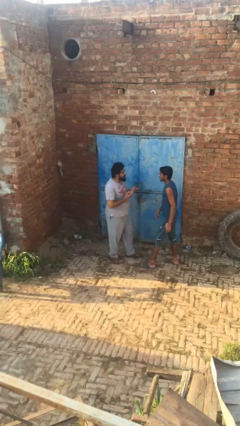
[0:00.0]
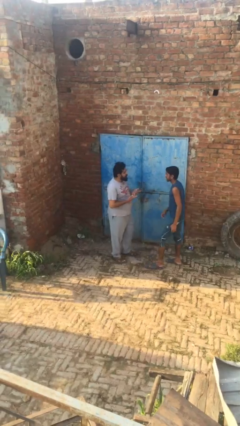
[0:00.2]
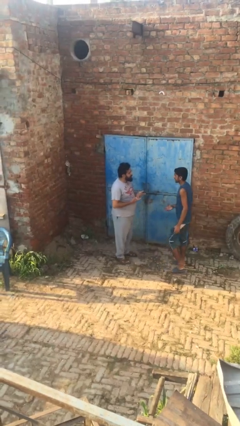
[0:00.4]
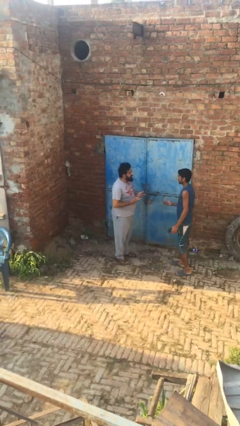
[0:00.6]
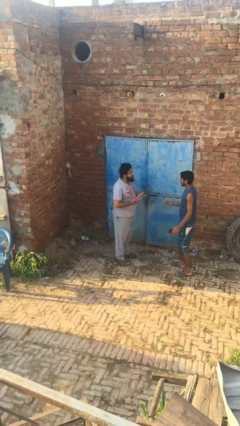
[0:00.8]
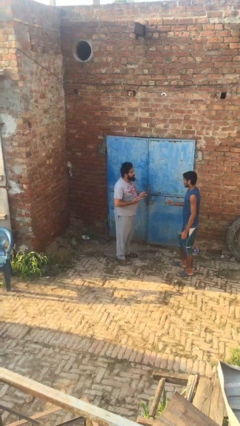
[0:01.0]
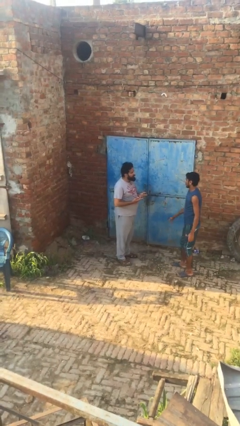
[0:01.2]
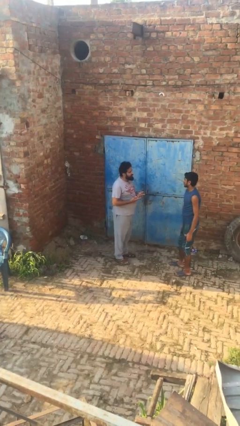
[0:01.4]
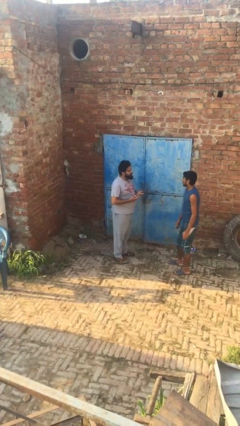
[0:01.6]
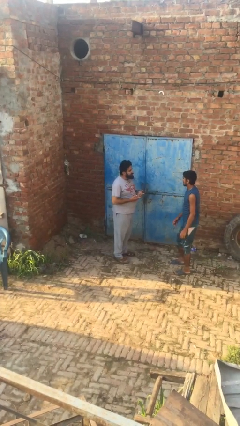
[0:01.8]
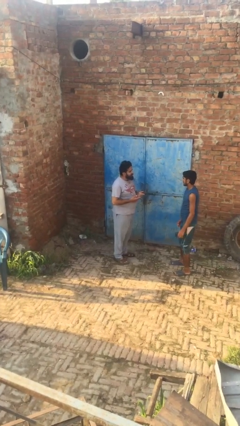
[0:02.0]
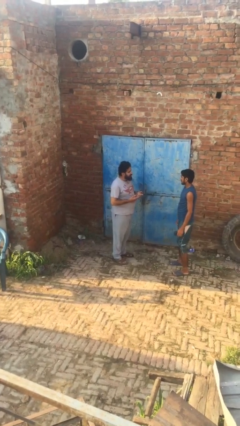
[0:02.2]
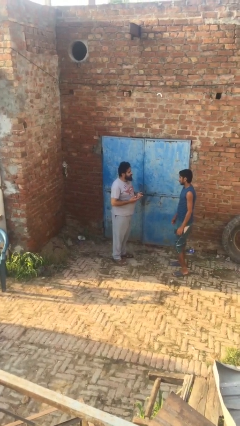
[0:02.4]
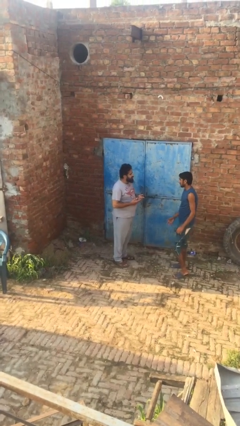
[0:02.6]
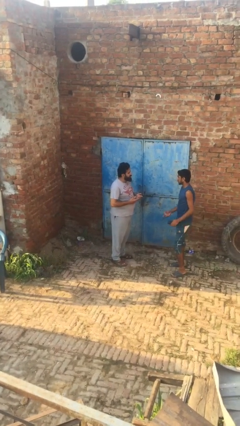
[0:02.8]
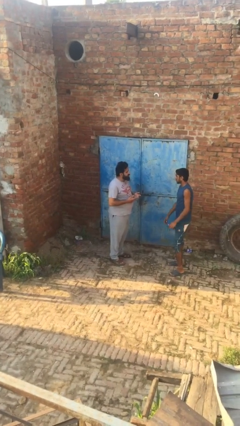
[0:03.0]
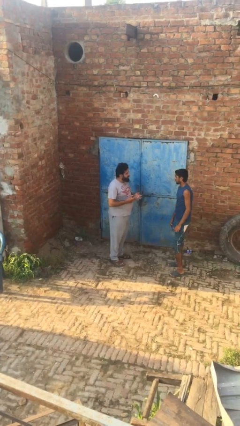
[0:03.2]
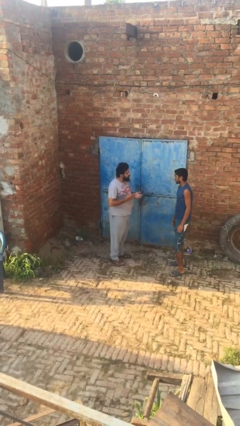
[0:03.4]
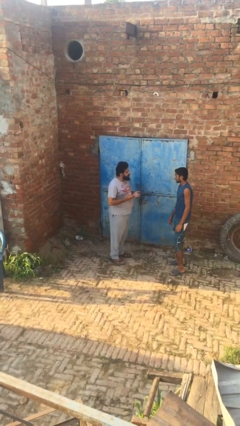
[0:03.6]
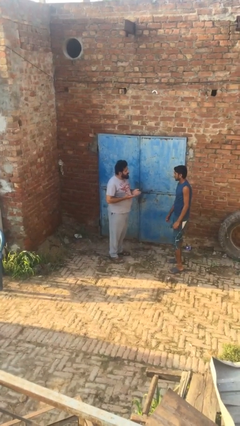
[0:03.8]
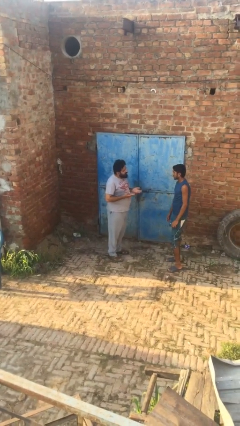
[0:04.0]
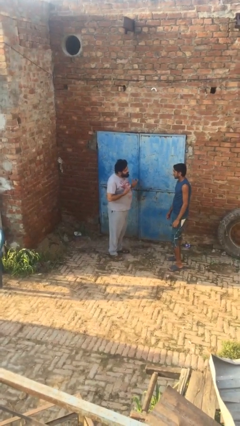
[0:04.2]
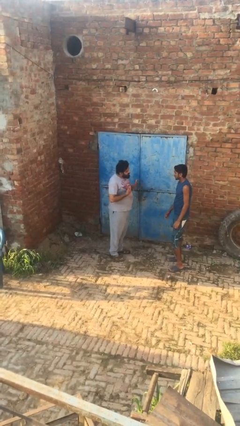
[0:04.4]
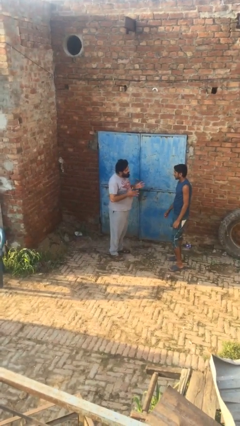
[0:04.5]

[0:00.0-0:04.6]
person talks to person

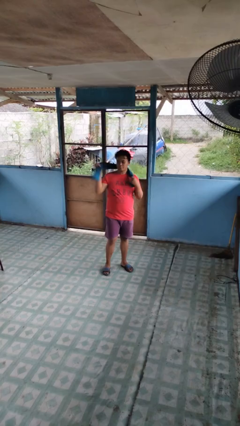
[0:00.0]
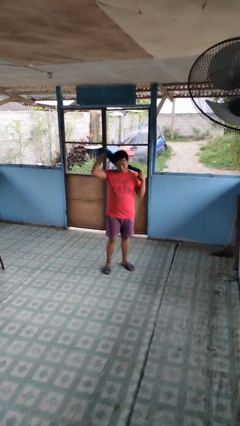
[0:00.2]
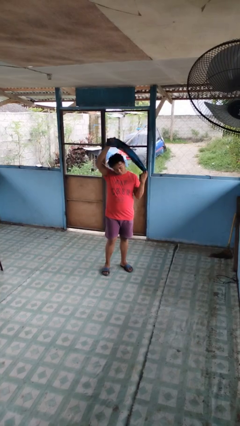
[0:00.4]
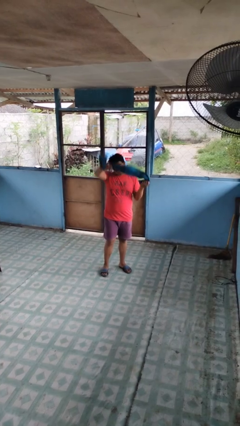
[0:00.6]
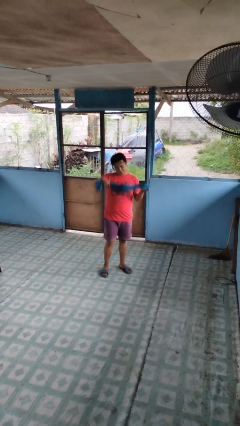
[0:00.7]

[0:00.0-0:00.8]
person takes off scarf

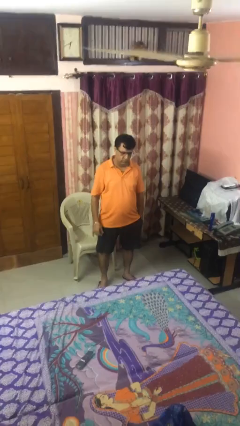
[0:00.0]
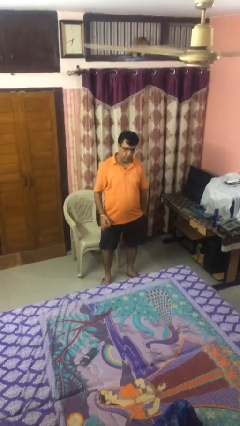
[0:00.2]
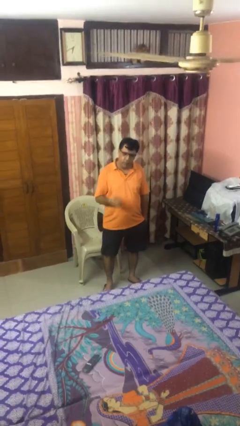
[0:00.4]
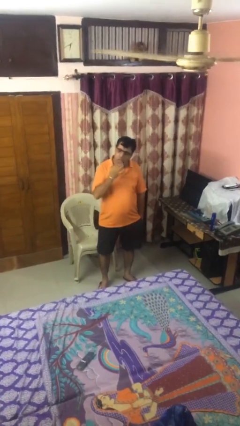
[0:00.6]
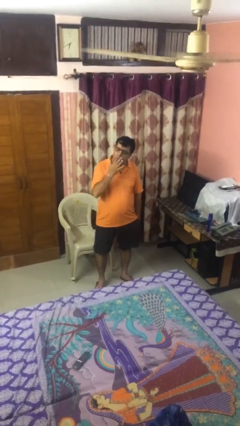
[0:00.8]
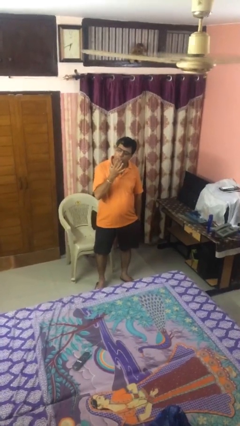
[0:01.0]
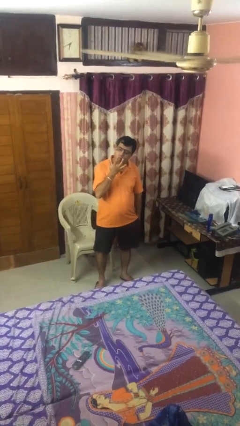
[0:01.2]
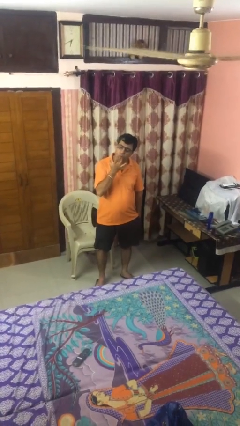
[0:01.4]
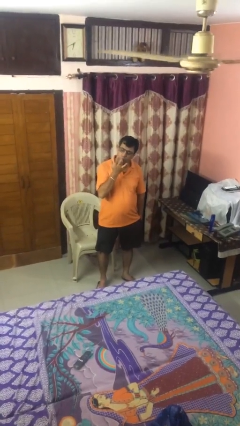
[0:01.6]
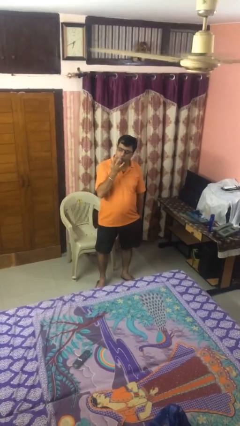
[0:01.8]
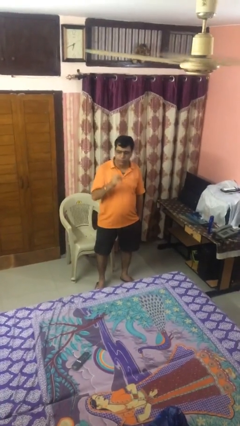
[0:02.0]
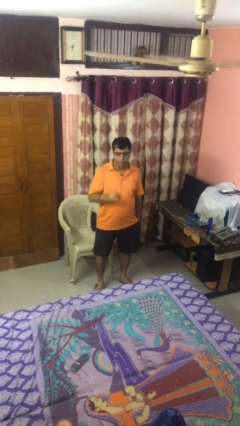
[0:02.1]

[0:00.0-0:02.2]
person licks fingers

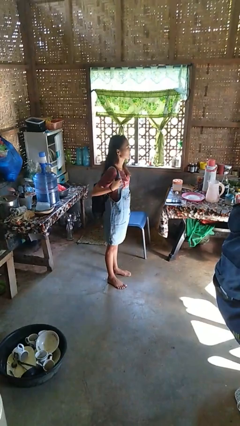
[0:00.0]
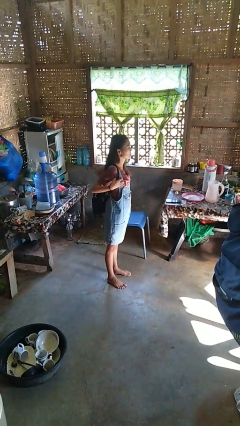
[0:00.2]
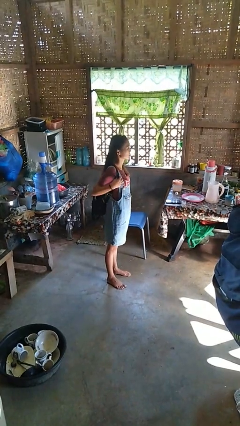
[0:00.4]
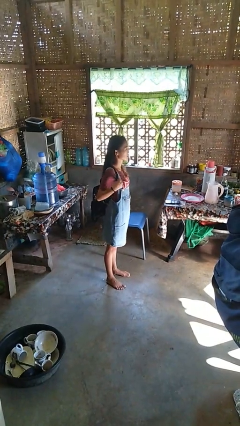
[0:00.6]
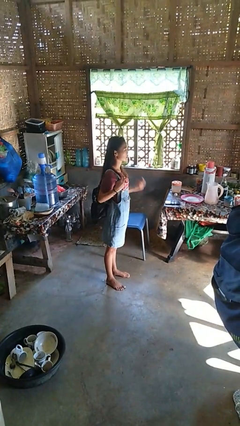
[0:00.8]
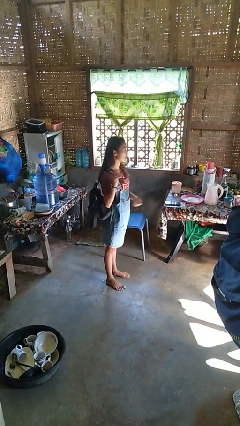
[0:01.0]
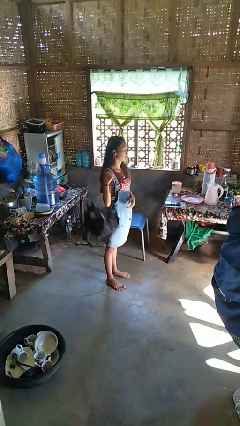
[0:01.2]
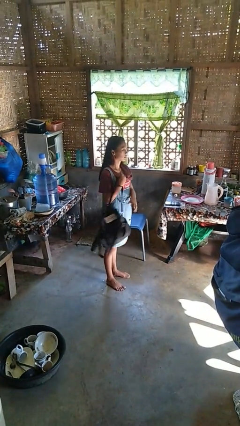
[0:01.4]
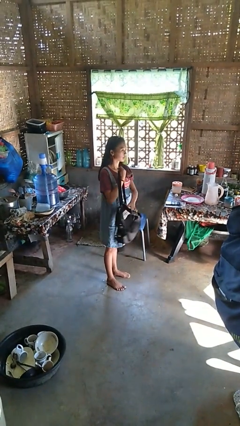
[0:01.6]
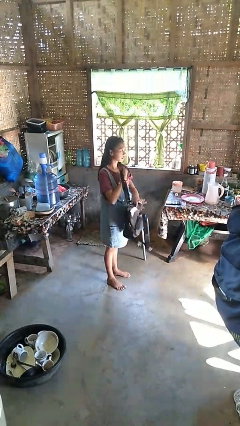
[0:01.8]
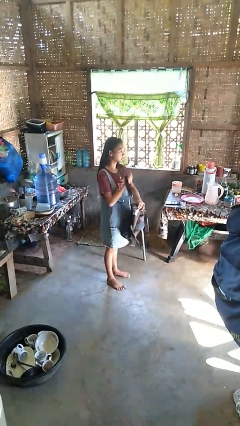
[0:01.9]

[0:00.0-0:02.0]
person takes off backpack

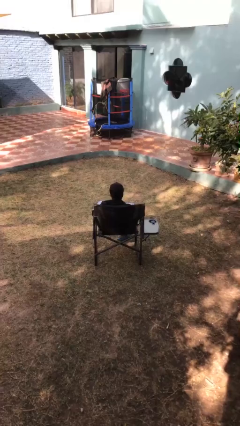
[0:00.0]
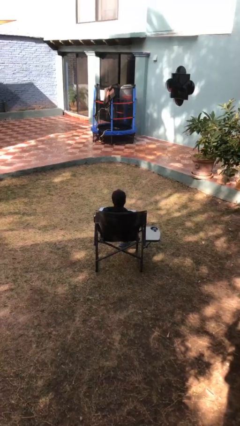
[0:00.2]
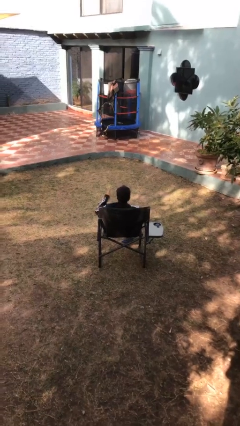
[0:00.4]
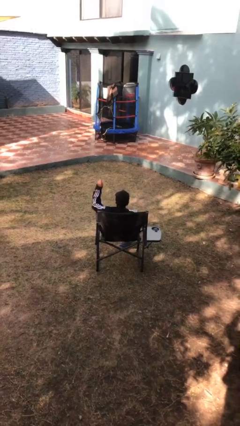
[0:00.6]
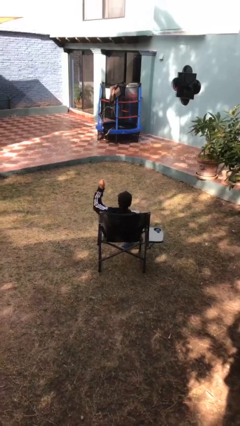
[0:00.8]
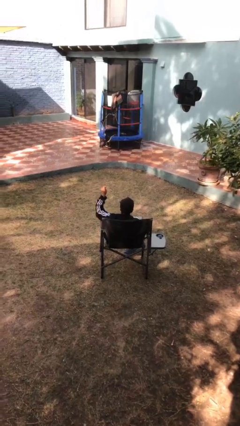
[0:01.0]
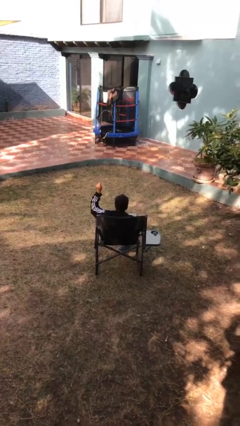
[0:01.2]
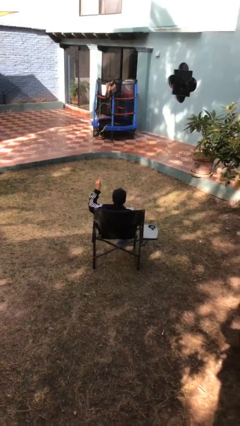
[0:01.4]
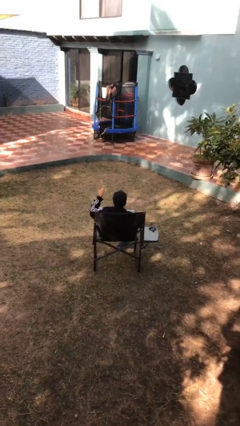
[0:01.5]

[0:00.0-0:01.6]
person gestures number one

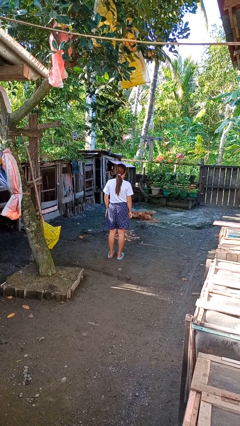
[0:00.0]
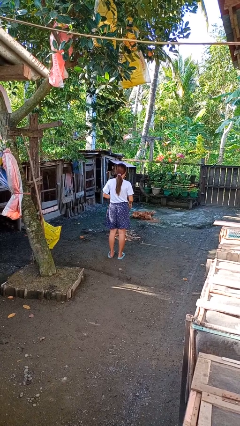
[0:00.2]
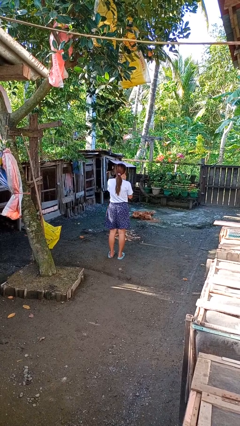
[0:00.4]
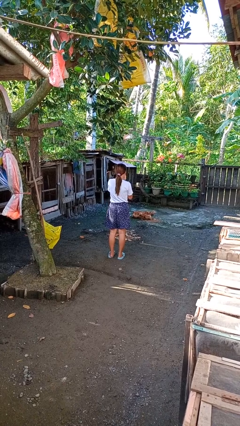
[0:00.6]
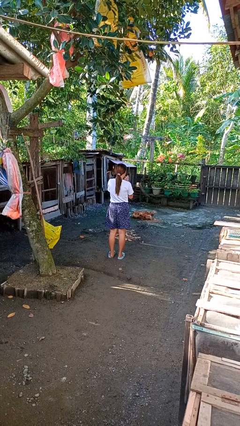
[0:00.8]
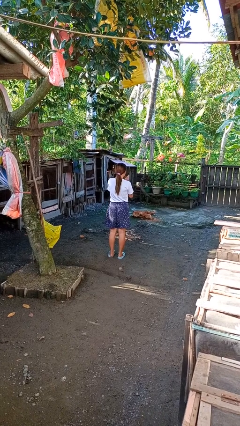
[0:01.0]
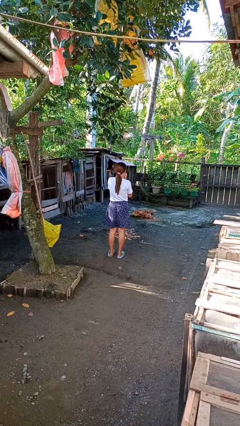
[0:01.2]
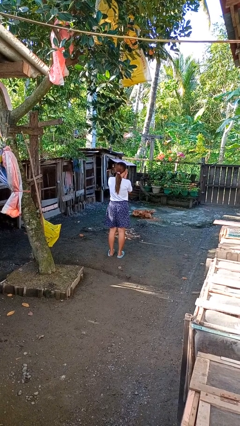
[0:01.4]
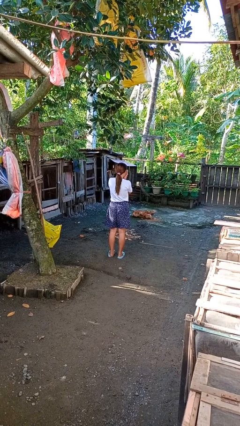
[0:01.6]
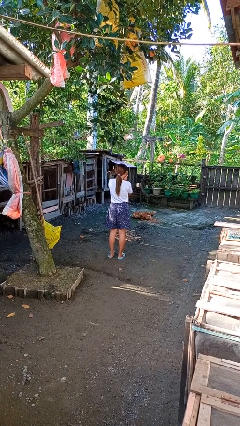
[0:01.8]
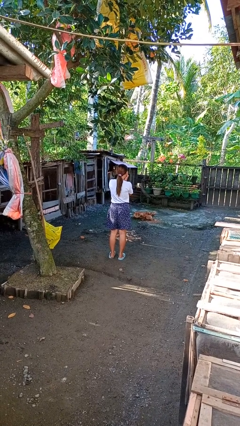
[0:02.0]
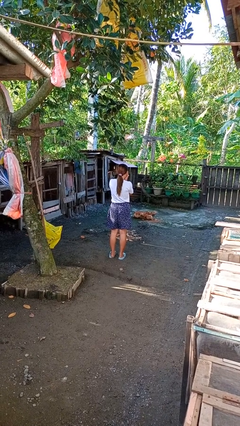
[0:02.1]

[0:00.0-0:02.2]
person blows into hands

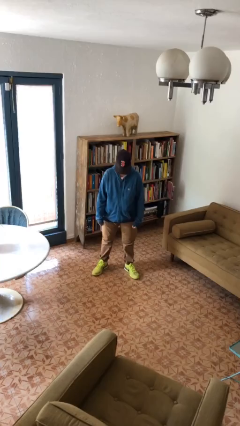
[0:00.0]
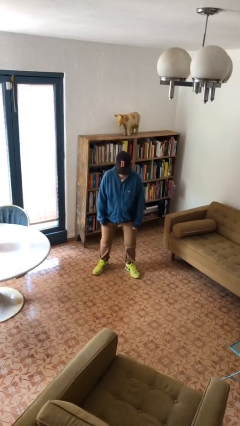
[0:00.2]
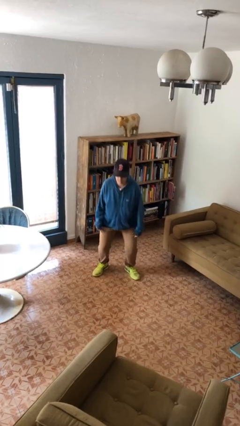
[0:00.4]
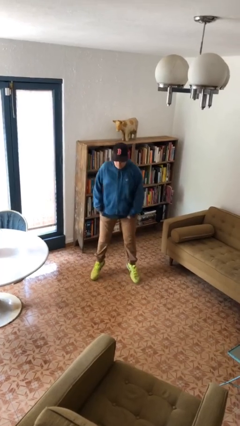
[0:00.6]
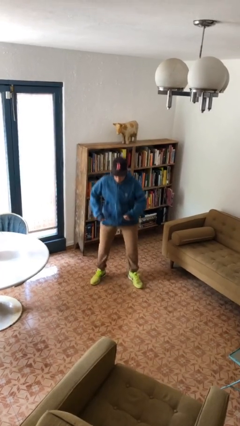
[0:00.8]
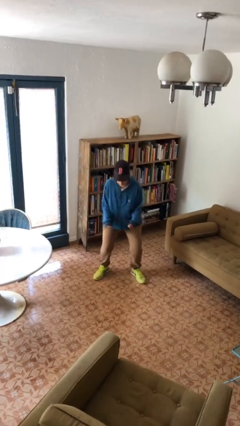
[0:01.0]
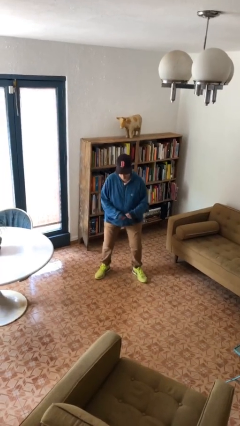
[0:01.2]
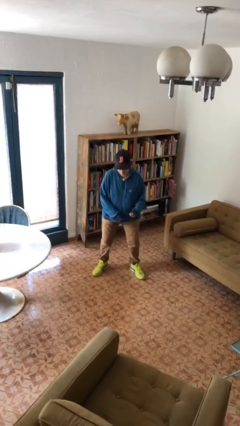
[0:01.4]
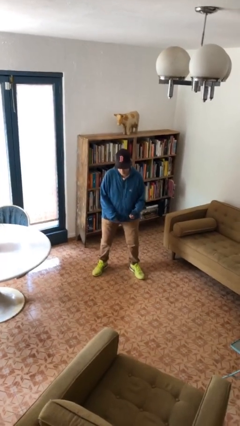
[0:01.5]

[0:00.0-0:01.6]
person jumps

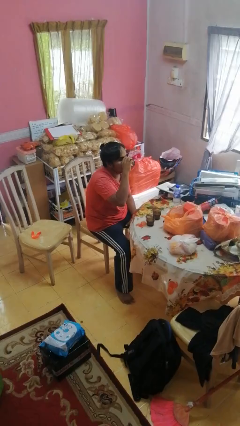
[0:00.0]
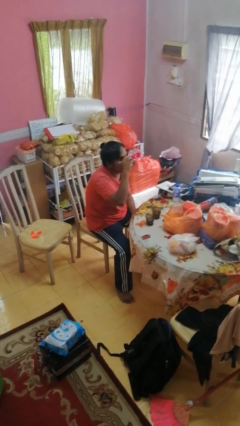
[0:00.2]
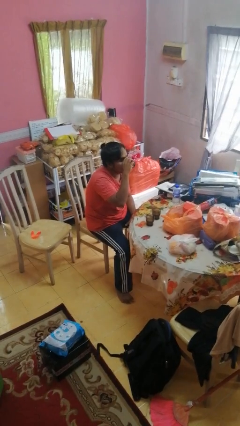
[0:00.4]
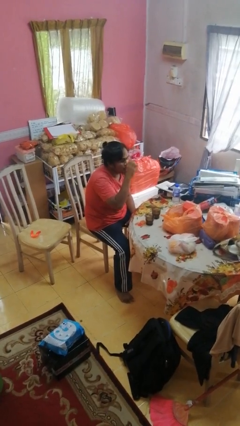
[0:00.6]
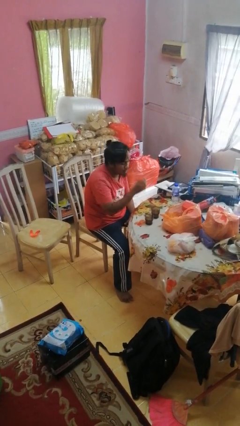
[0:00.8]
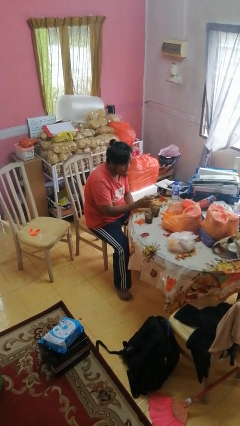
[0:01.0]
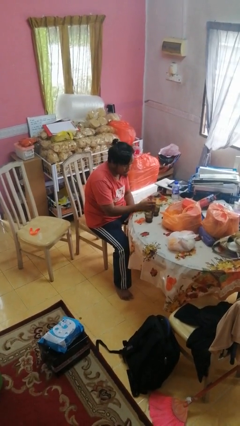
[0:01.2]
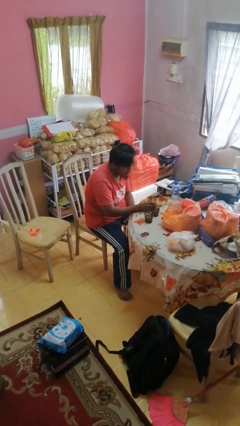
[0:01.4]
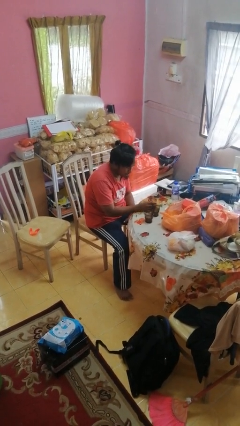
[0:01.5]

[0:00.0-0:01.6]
person puts down object on table

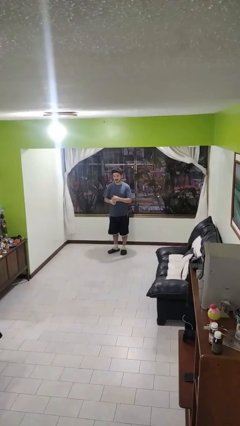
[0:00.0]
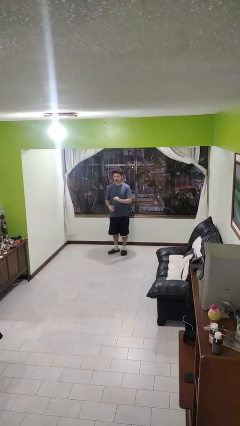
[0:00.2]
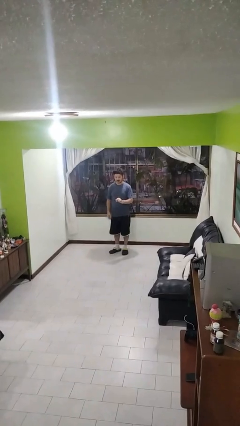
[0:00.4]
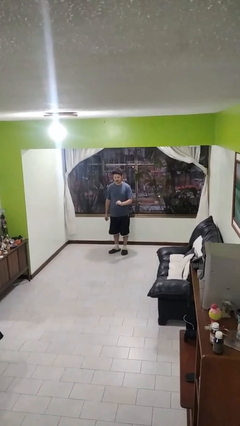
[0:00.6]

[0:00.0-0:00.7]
person puts on ring
